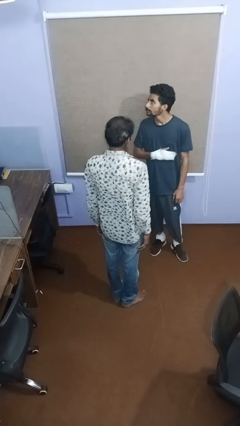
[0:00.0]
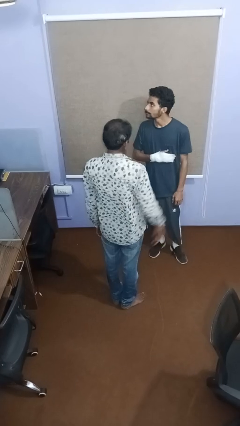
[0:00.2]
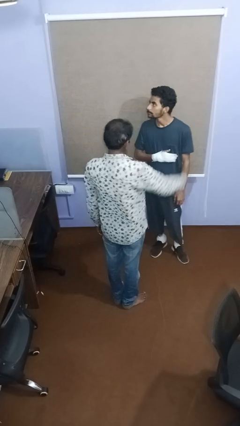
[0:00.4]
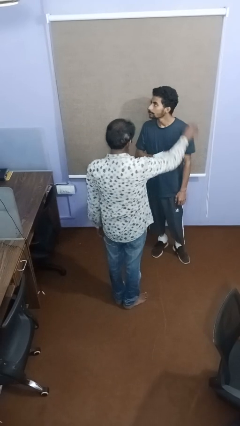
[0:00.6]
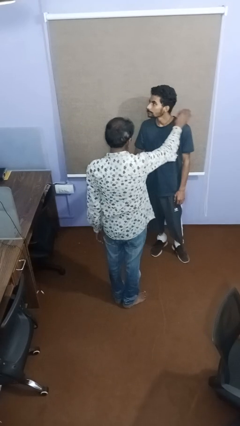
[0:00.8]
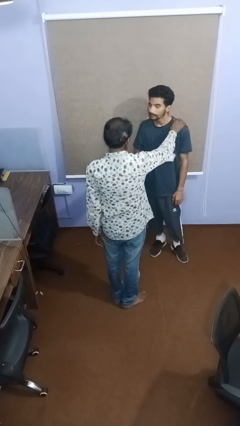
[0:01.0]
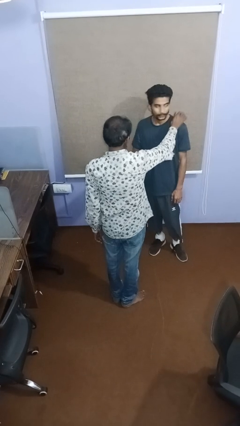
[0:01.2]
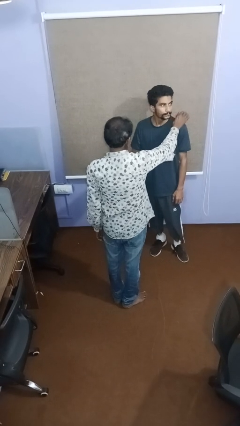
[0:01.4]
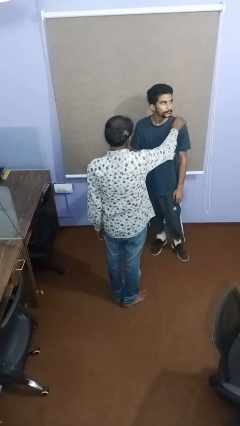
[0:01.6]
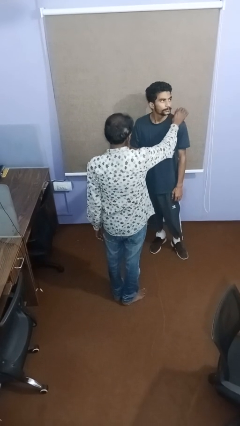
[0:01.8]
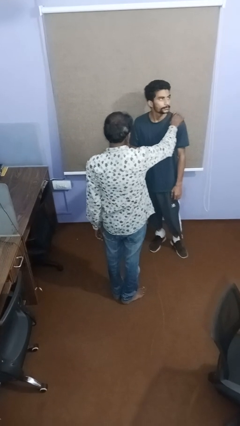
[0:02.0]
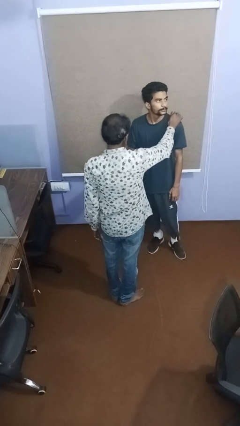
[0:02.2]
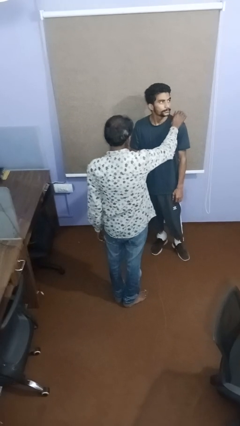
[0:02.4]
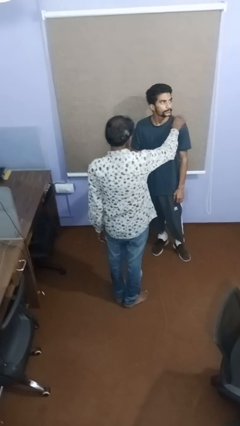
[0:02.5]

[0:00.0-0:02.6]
person pounds shoulders of person

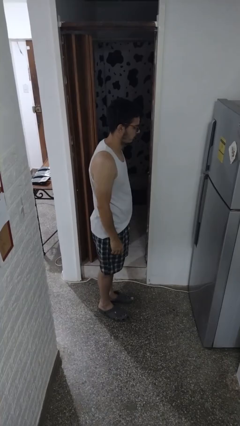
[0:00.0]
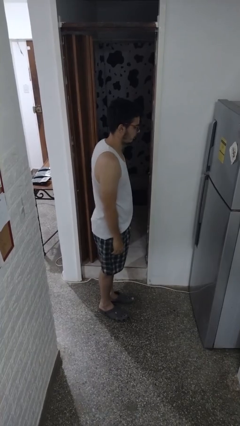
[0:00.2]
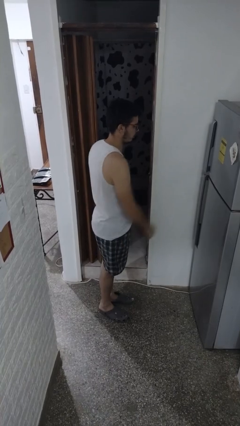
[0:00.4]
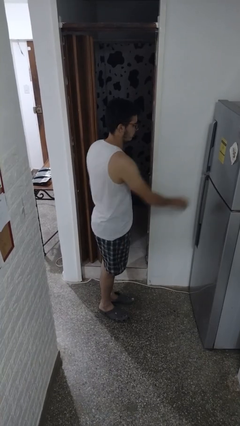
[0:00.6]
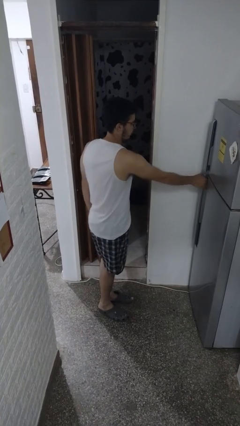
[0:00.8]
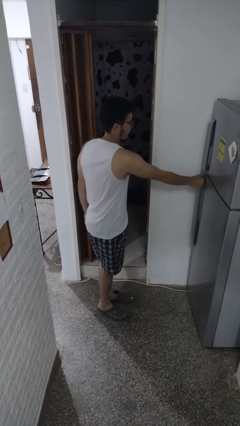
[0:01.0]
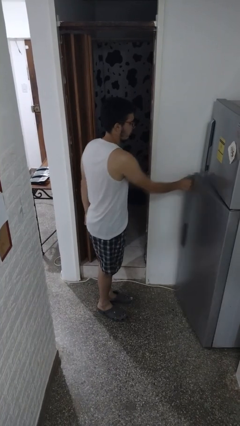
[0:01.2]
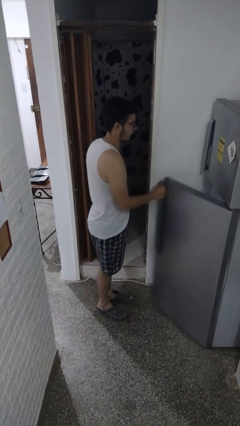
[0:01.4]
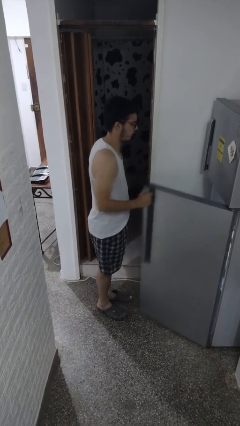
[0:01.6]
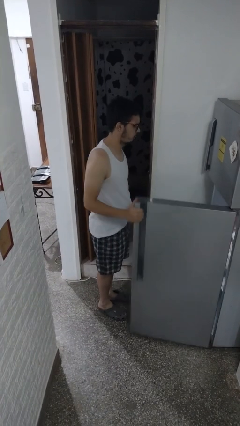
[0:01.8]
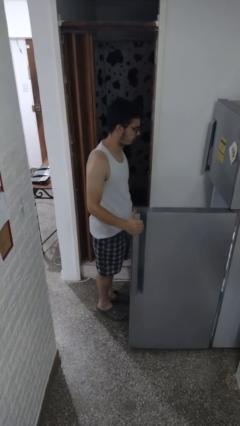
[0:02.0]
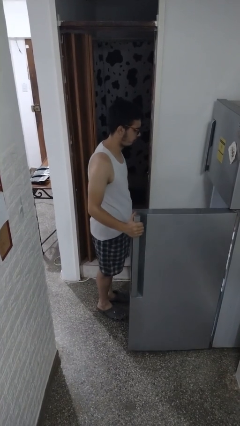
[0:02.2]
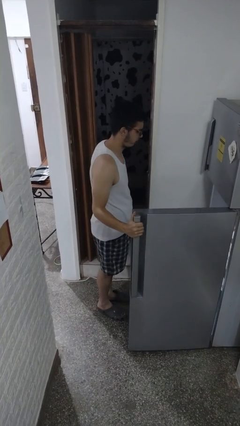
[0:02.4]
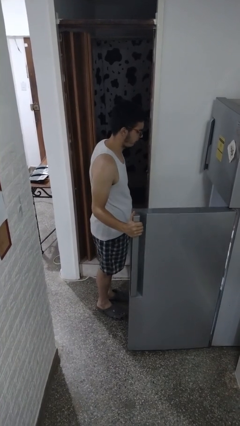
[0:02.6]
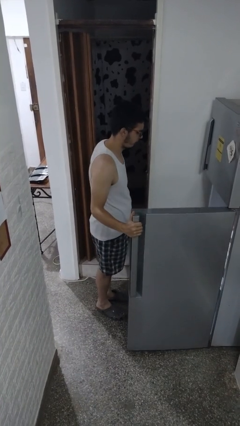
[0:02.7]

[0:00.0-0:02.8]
person opens refrigerator

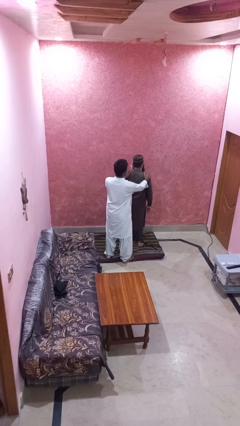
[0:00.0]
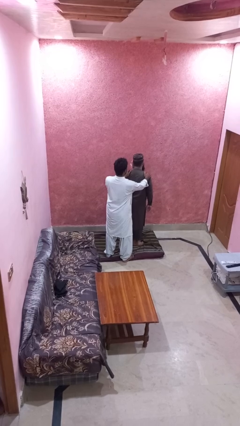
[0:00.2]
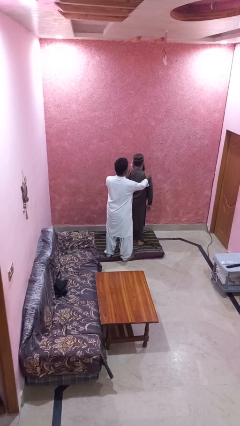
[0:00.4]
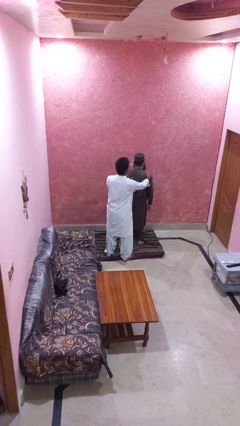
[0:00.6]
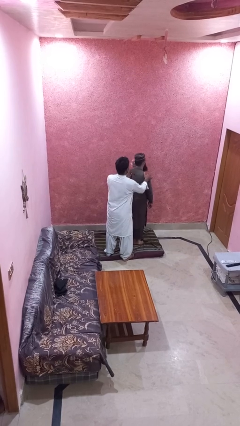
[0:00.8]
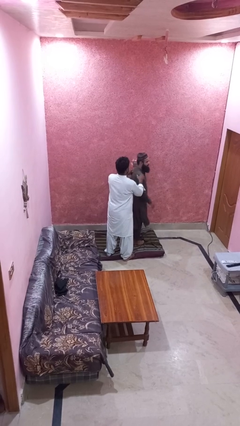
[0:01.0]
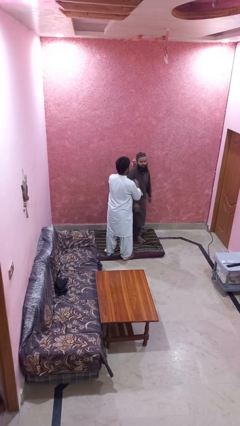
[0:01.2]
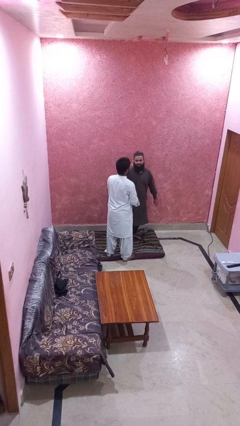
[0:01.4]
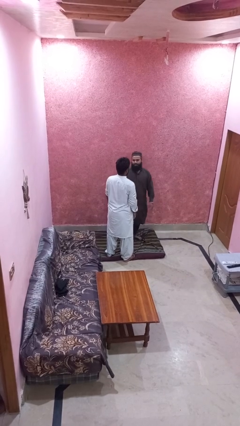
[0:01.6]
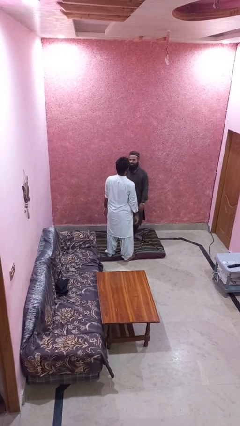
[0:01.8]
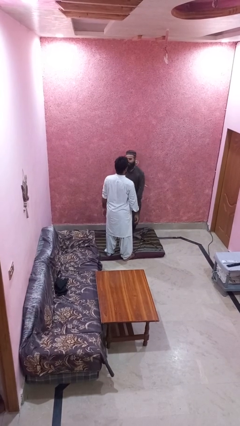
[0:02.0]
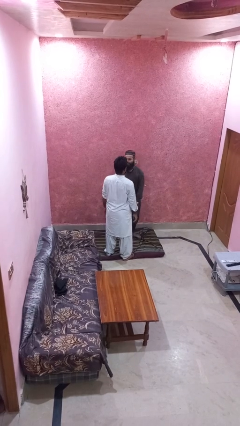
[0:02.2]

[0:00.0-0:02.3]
person spins person around

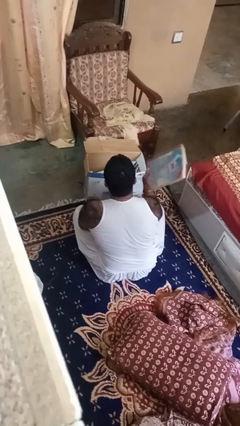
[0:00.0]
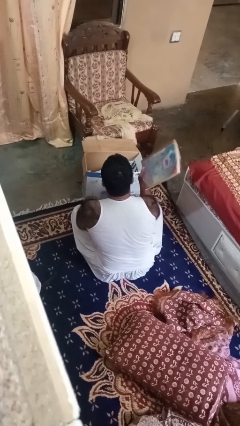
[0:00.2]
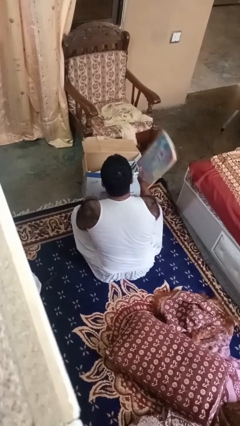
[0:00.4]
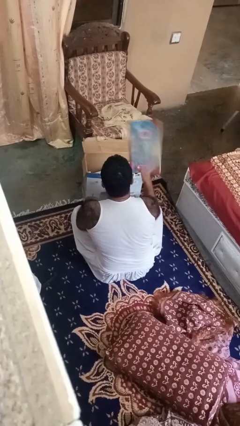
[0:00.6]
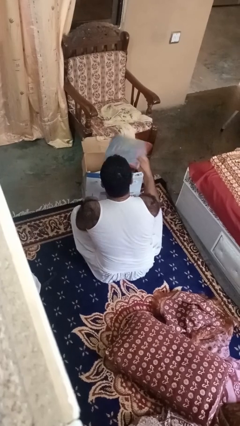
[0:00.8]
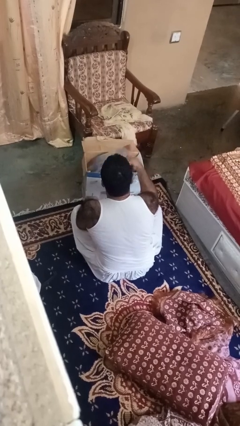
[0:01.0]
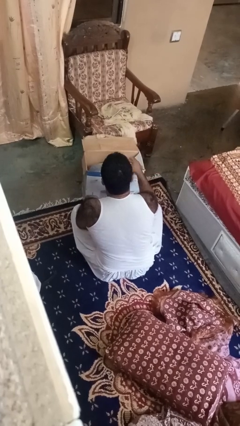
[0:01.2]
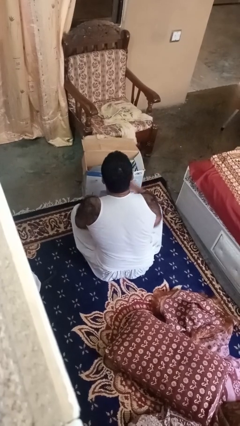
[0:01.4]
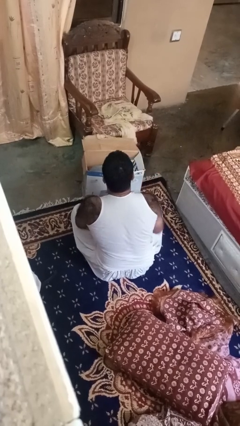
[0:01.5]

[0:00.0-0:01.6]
person puts object into box

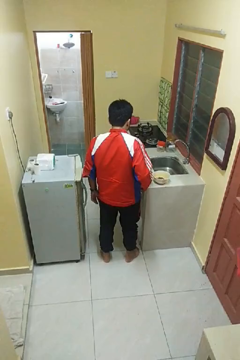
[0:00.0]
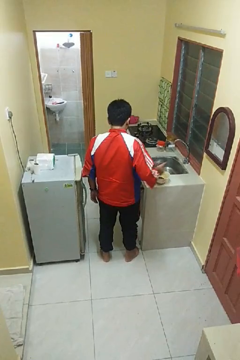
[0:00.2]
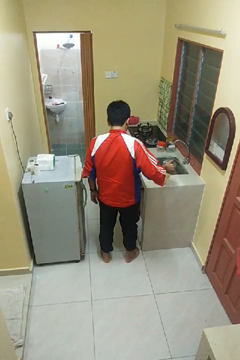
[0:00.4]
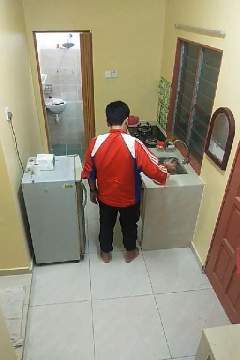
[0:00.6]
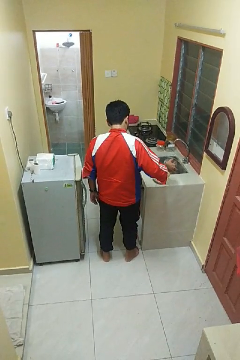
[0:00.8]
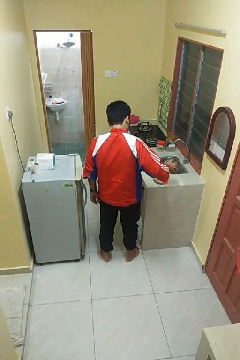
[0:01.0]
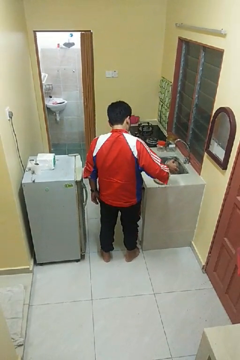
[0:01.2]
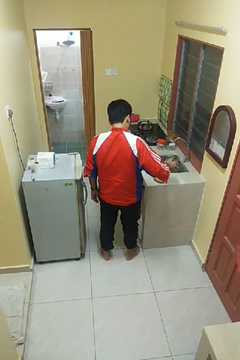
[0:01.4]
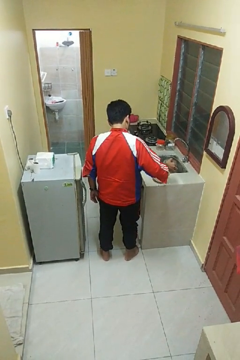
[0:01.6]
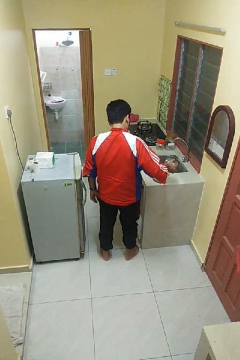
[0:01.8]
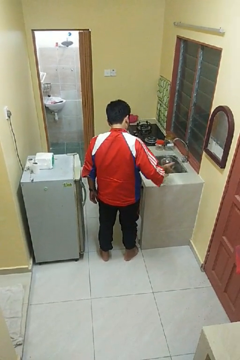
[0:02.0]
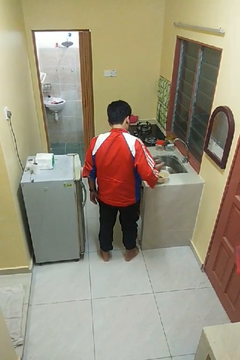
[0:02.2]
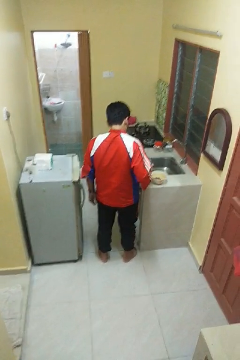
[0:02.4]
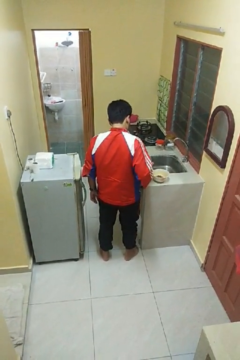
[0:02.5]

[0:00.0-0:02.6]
person pours into bowl

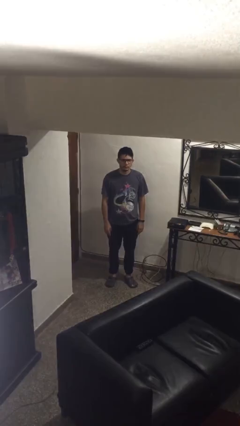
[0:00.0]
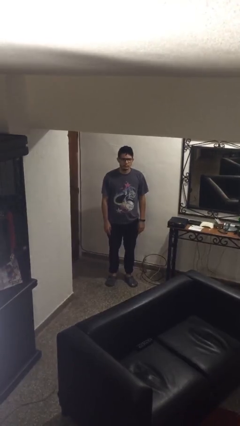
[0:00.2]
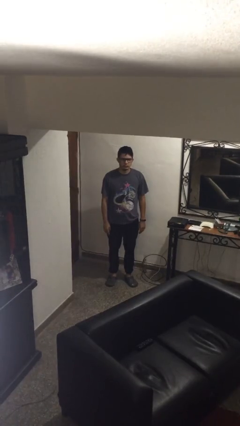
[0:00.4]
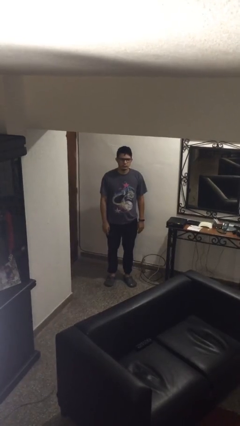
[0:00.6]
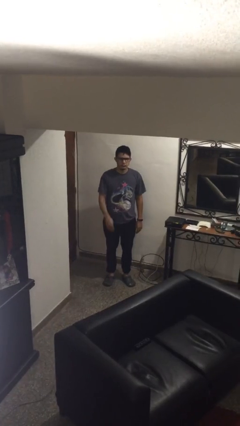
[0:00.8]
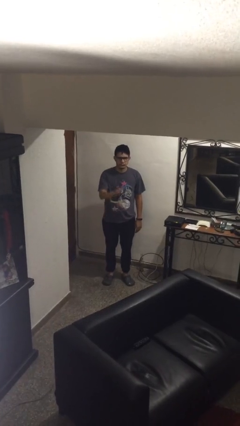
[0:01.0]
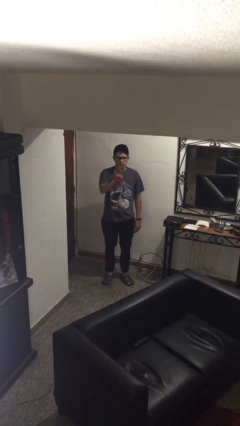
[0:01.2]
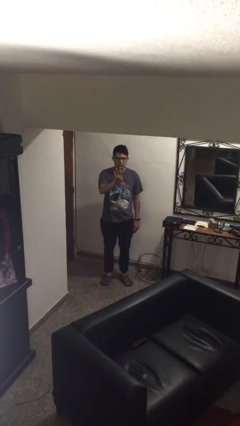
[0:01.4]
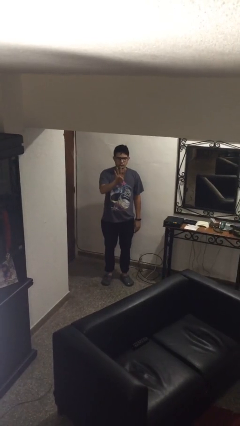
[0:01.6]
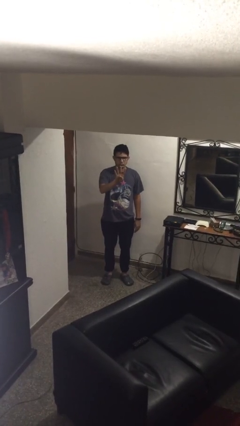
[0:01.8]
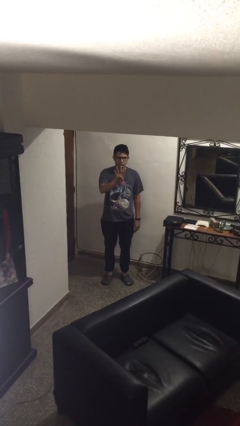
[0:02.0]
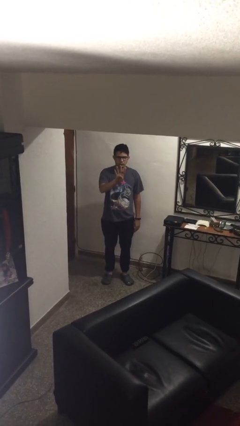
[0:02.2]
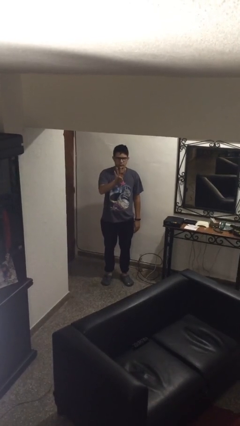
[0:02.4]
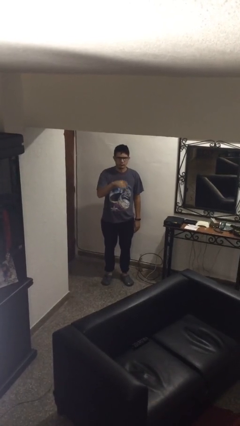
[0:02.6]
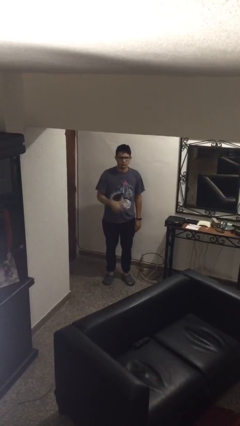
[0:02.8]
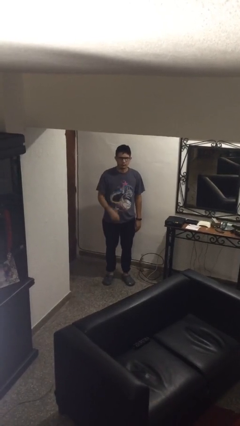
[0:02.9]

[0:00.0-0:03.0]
person gestures number four

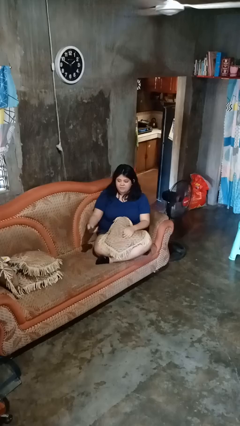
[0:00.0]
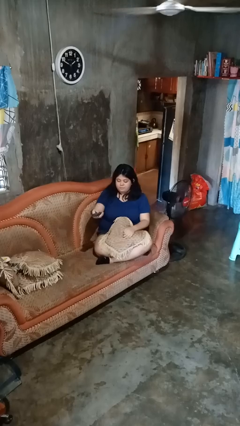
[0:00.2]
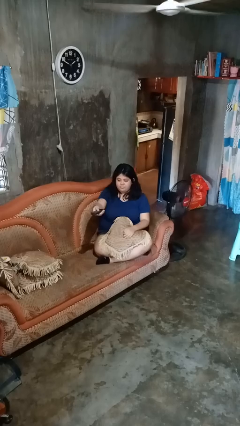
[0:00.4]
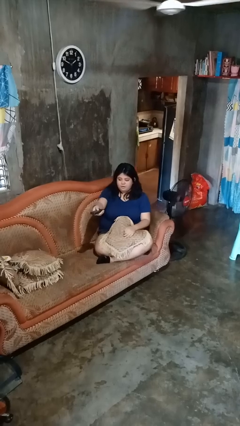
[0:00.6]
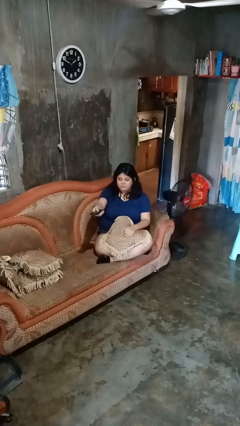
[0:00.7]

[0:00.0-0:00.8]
person uses television remote

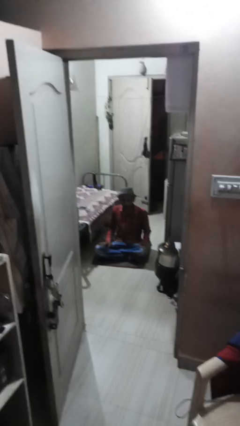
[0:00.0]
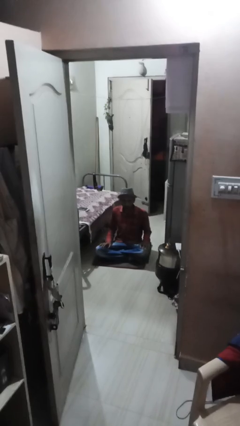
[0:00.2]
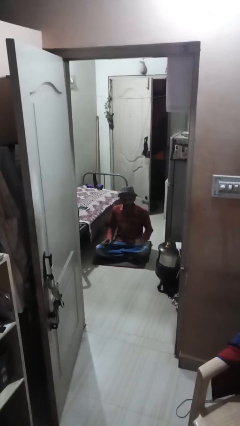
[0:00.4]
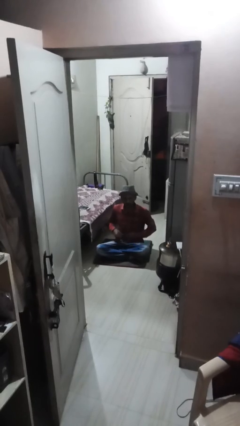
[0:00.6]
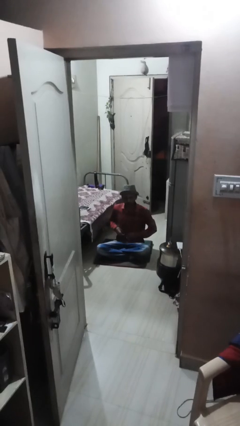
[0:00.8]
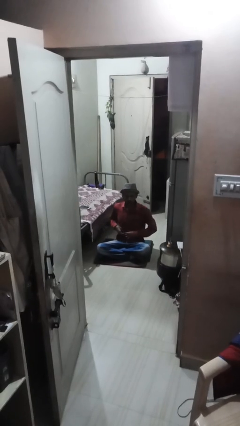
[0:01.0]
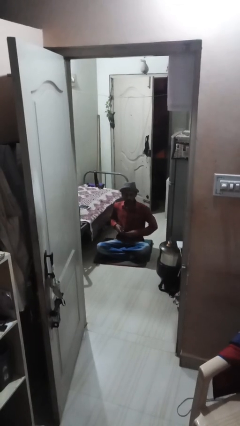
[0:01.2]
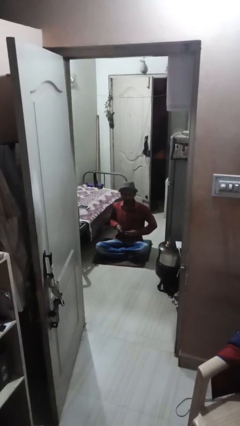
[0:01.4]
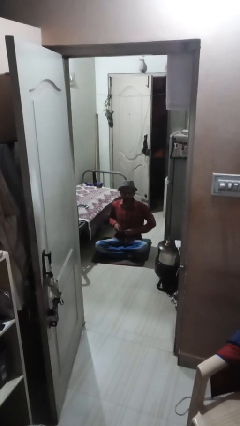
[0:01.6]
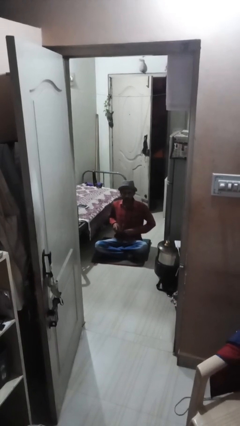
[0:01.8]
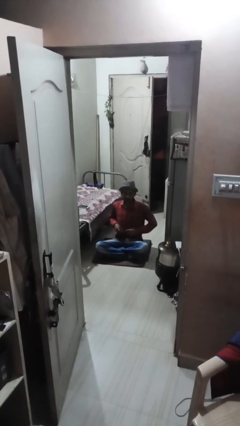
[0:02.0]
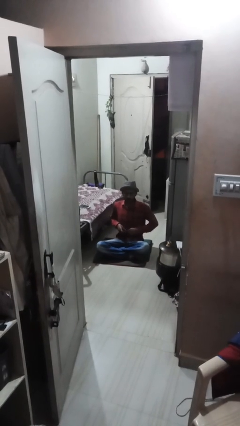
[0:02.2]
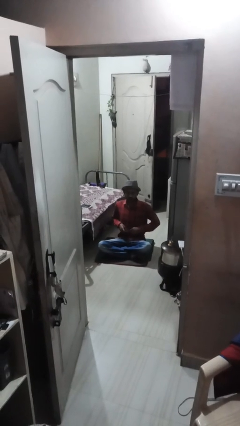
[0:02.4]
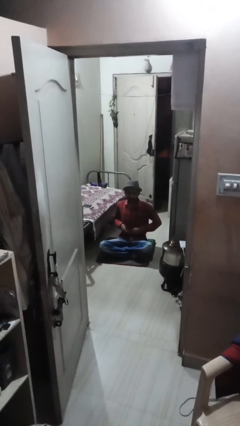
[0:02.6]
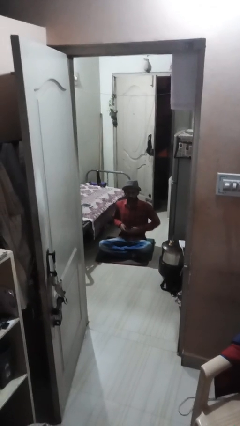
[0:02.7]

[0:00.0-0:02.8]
person unbuttons shirt
